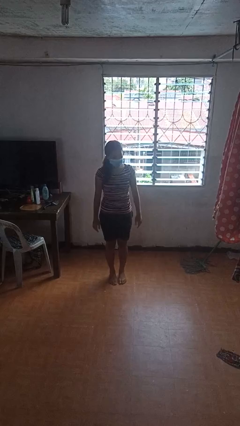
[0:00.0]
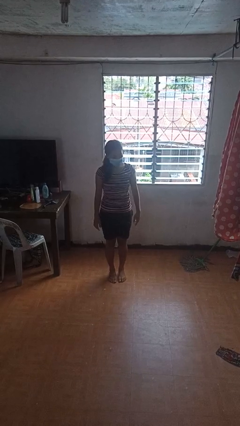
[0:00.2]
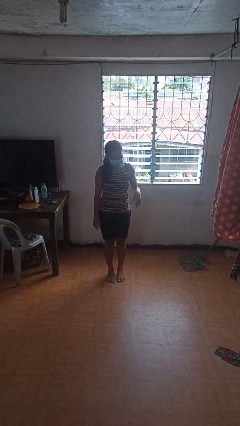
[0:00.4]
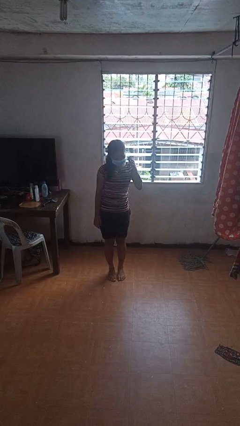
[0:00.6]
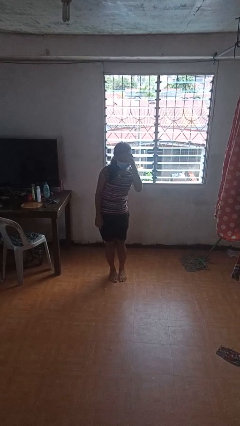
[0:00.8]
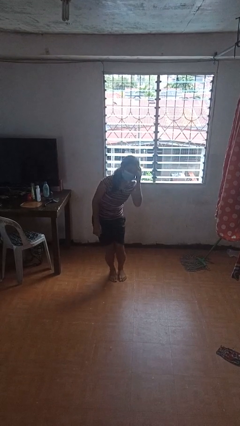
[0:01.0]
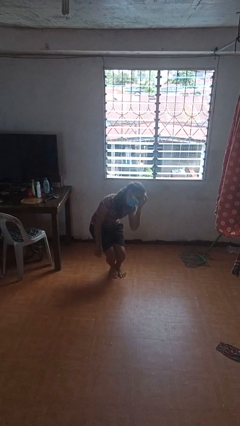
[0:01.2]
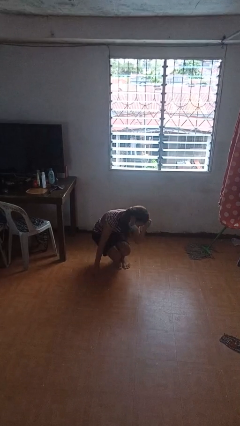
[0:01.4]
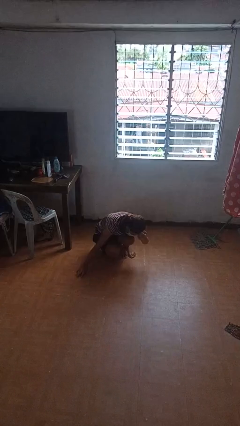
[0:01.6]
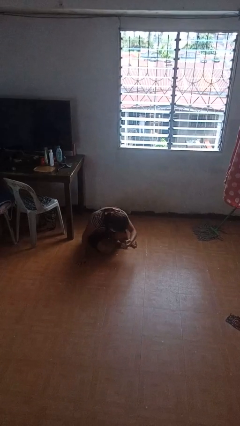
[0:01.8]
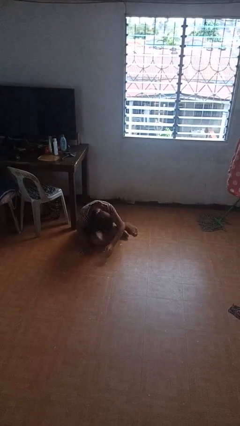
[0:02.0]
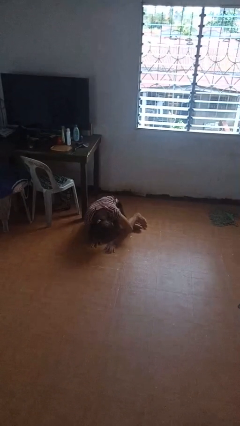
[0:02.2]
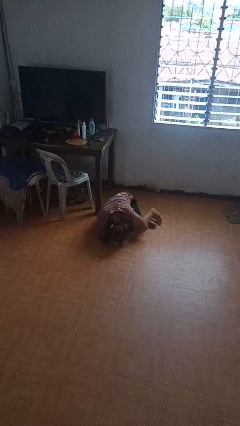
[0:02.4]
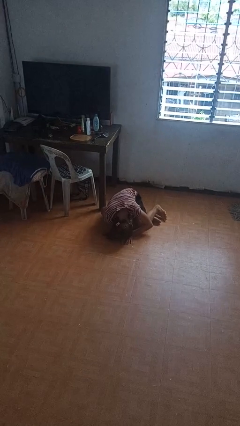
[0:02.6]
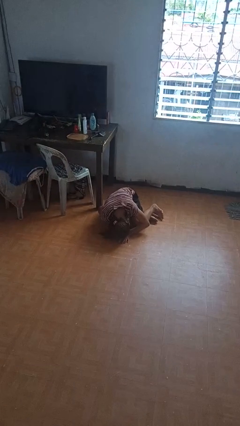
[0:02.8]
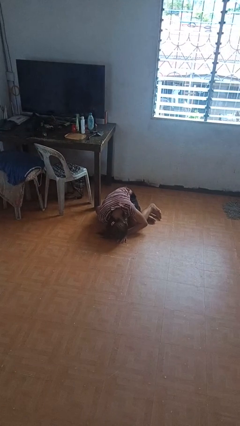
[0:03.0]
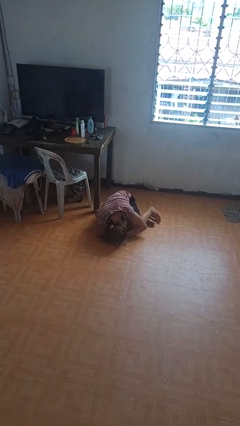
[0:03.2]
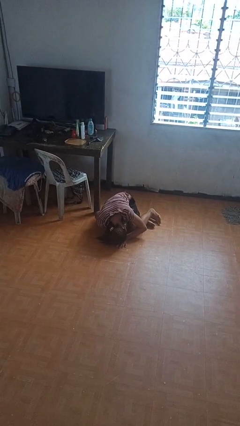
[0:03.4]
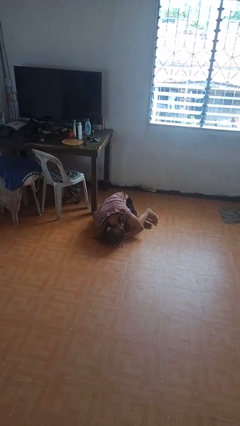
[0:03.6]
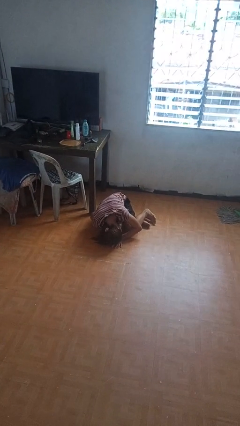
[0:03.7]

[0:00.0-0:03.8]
person falls while standing

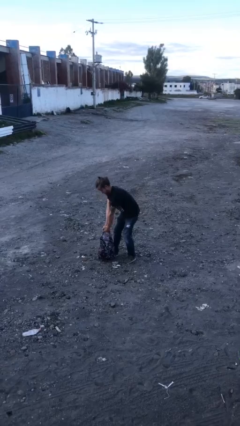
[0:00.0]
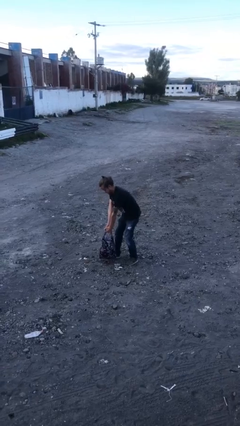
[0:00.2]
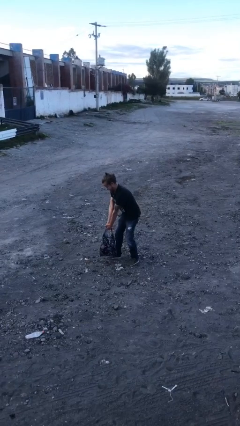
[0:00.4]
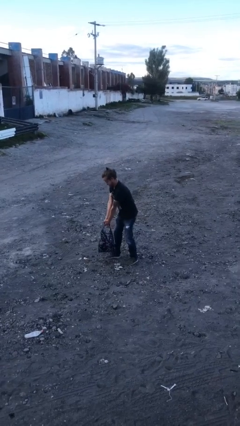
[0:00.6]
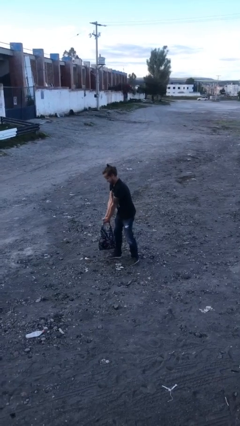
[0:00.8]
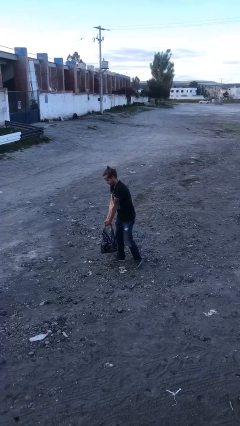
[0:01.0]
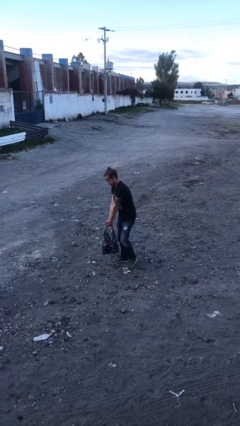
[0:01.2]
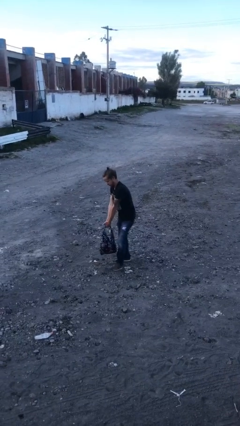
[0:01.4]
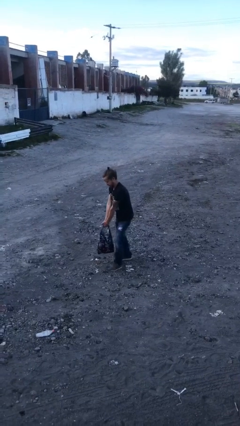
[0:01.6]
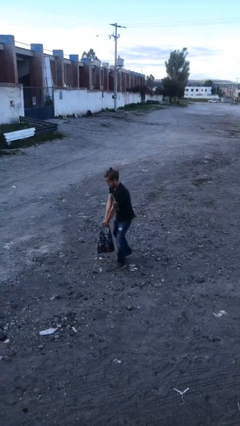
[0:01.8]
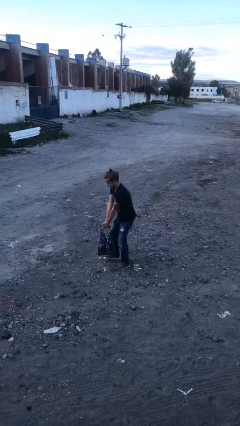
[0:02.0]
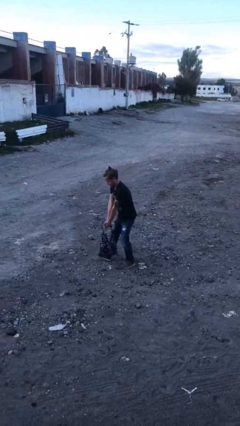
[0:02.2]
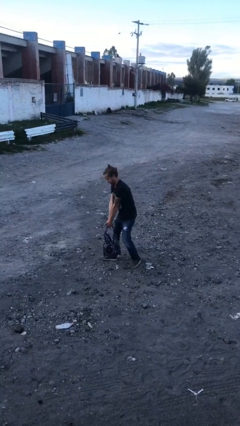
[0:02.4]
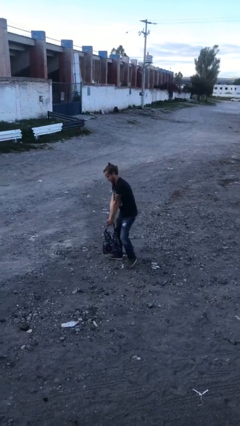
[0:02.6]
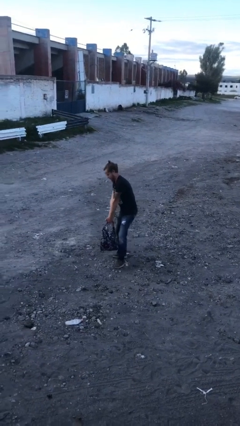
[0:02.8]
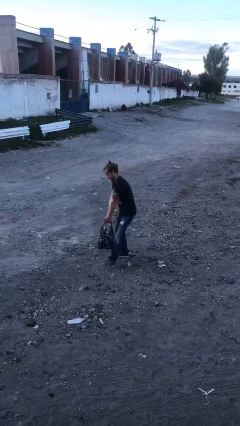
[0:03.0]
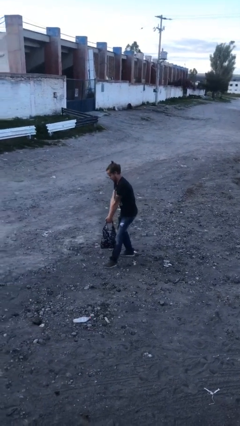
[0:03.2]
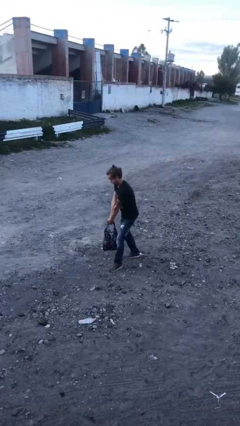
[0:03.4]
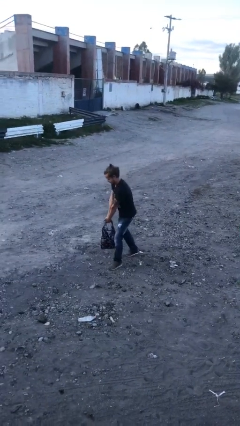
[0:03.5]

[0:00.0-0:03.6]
person carries heavy object

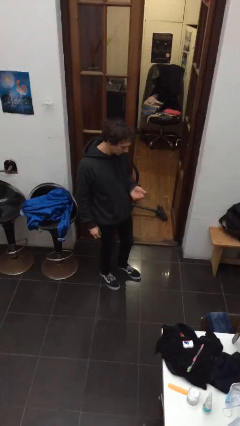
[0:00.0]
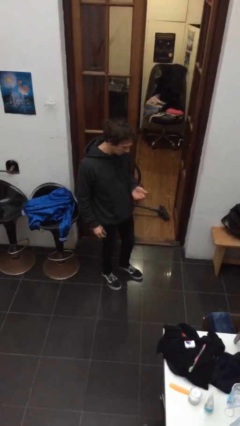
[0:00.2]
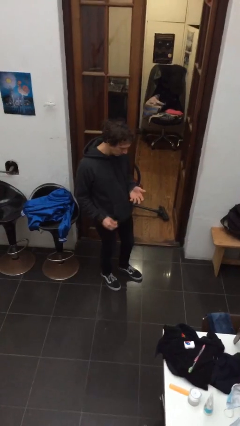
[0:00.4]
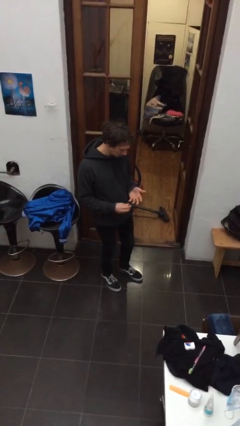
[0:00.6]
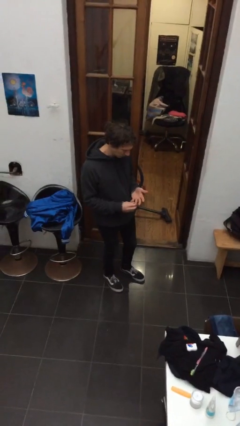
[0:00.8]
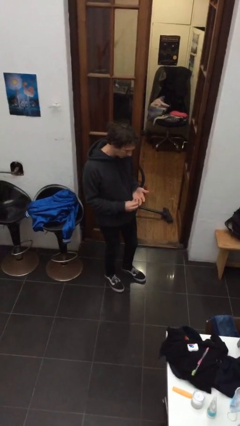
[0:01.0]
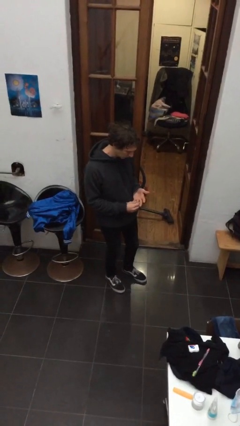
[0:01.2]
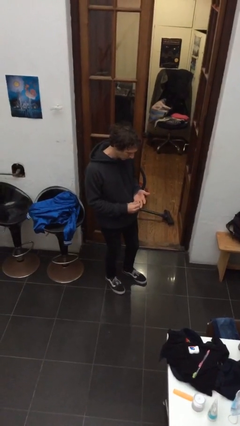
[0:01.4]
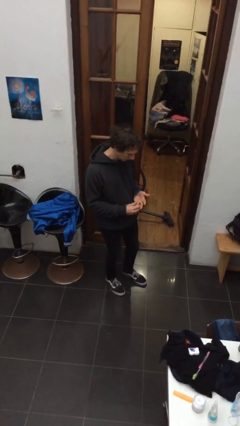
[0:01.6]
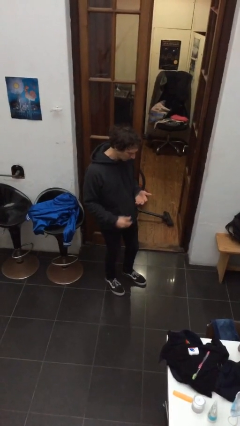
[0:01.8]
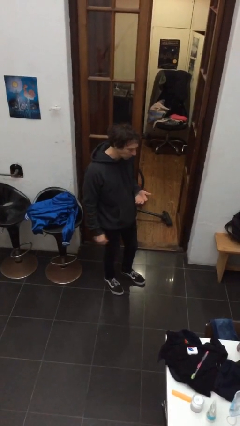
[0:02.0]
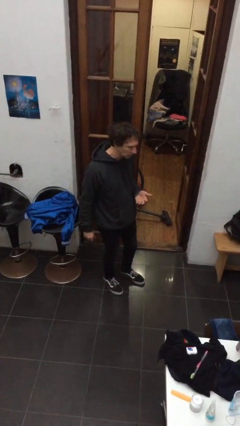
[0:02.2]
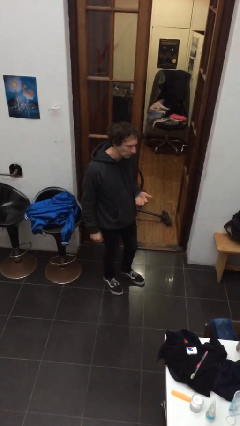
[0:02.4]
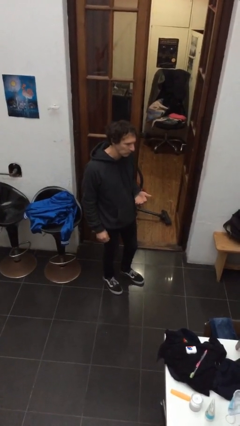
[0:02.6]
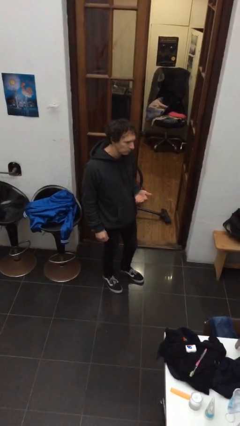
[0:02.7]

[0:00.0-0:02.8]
person puts on ring

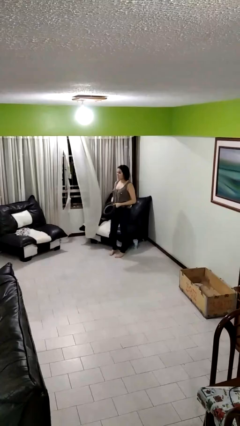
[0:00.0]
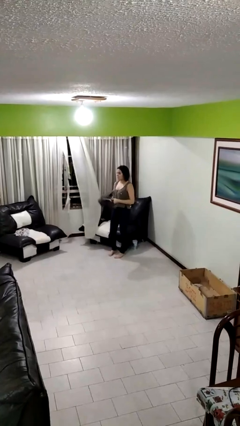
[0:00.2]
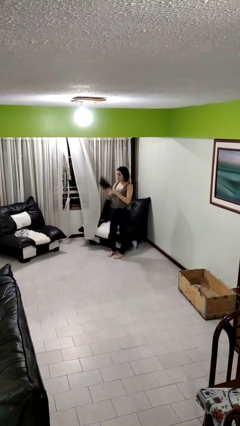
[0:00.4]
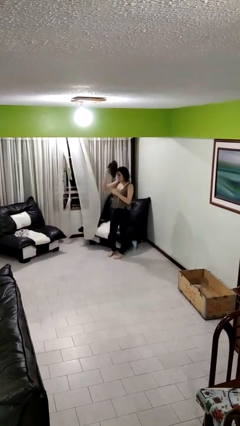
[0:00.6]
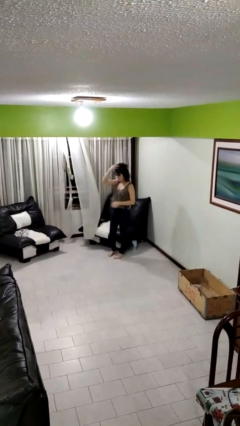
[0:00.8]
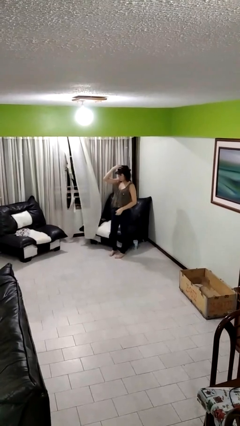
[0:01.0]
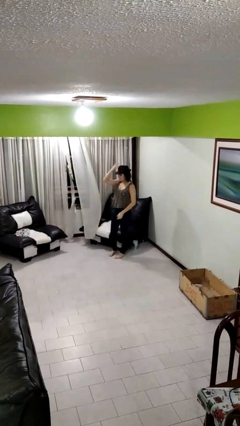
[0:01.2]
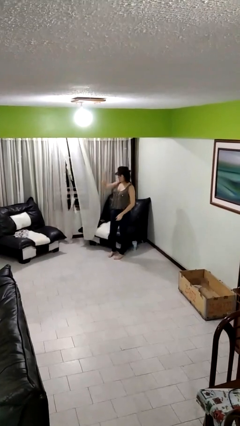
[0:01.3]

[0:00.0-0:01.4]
person puts on hat

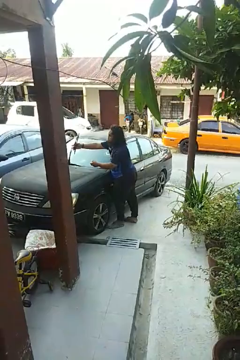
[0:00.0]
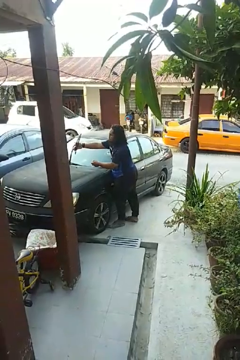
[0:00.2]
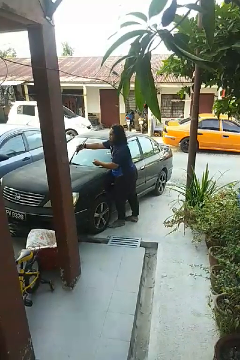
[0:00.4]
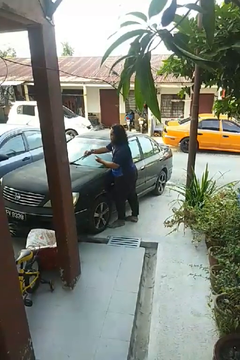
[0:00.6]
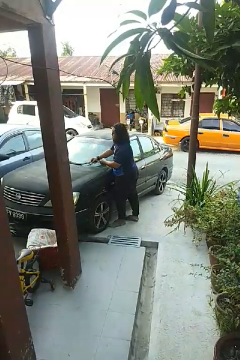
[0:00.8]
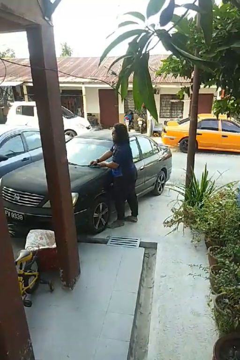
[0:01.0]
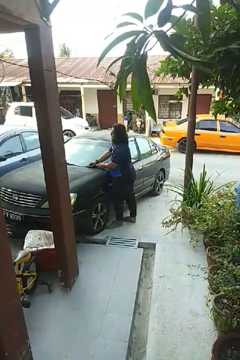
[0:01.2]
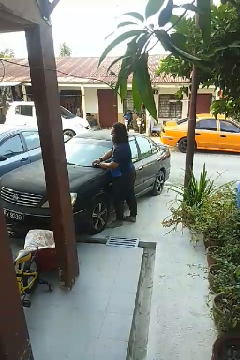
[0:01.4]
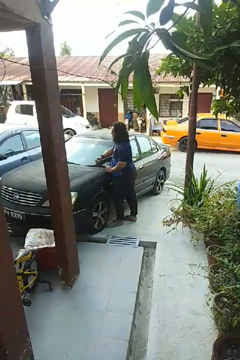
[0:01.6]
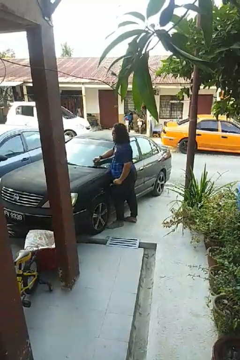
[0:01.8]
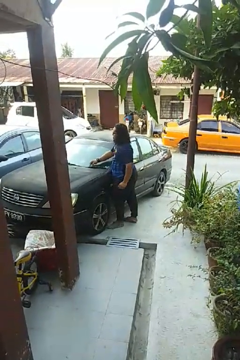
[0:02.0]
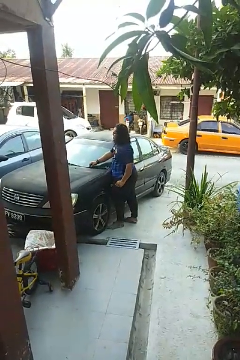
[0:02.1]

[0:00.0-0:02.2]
person flips down car wipers

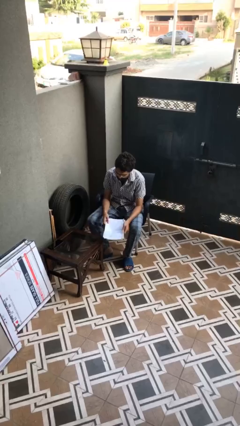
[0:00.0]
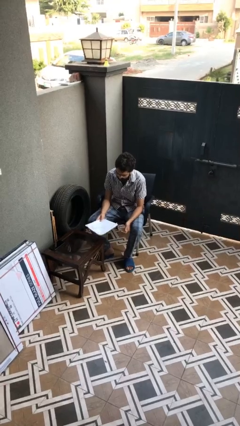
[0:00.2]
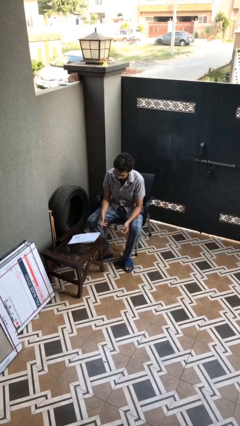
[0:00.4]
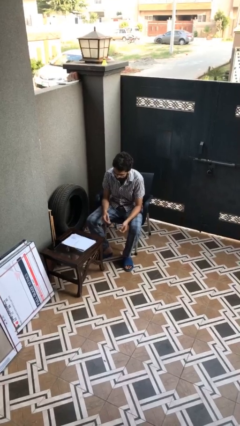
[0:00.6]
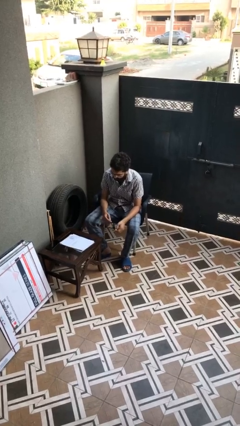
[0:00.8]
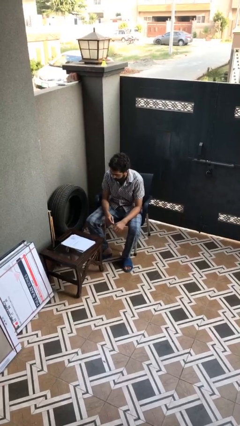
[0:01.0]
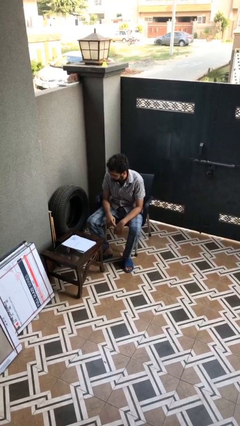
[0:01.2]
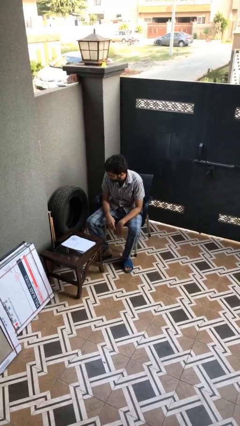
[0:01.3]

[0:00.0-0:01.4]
person puts down object on table

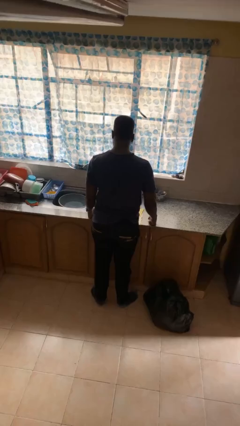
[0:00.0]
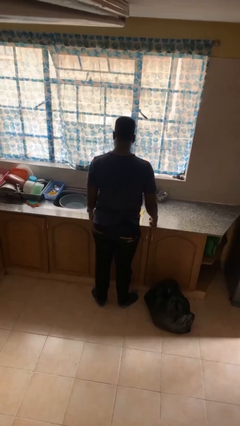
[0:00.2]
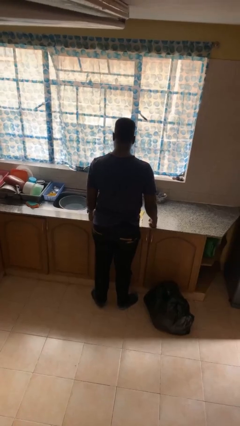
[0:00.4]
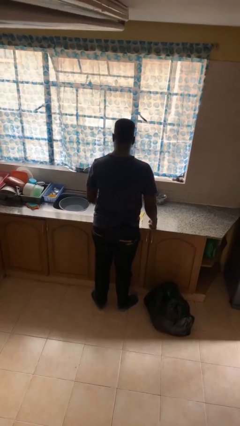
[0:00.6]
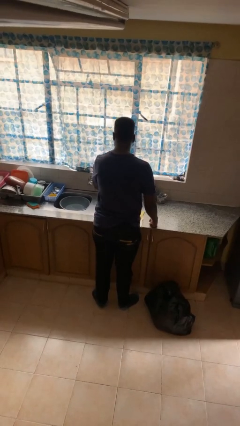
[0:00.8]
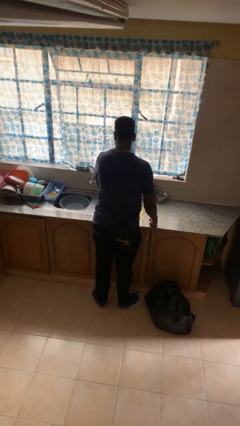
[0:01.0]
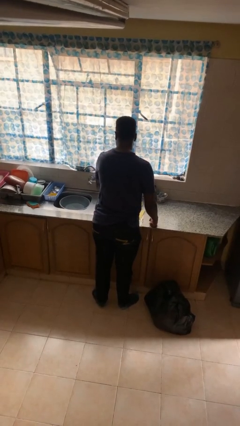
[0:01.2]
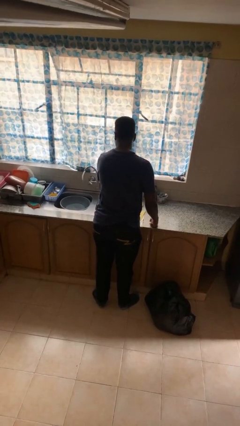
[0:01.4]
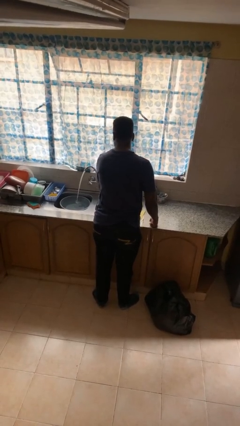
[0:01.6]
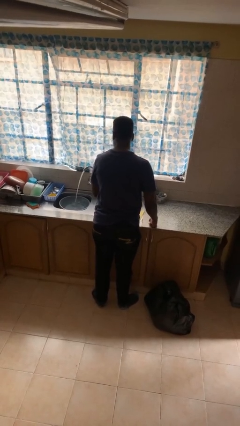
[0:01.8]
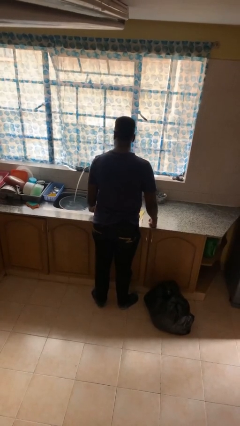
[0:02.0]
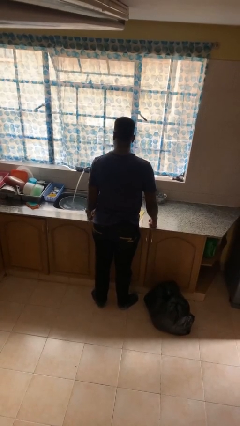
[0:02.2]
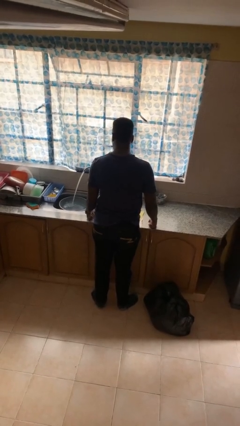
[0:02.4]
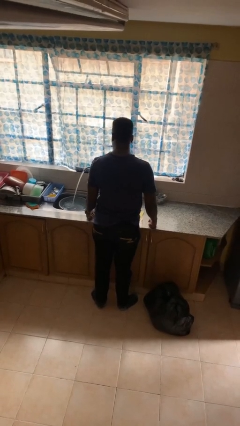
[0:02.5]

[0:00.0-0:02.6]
person turns on faucet
